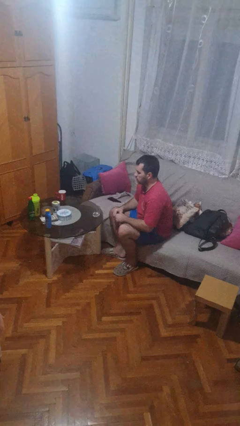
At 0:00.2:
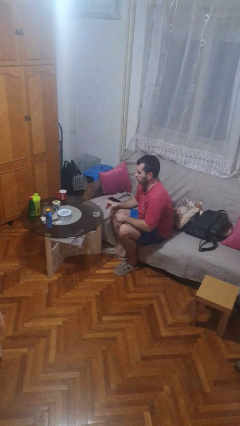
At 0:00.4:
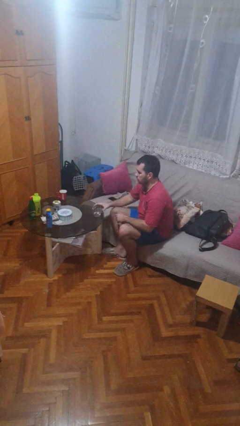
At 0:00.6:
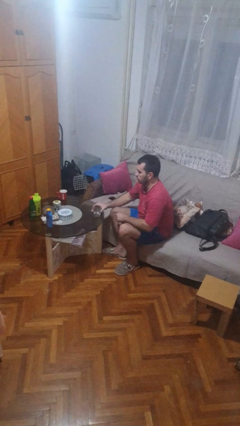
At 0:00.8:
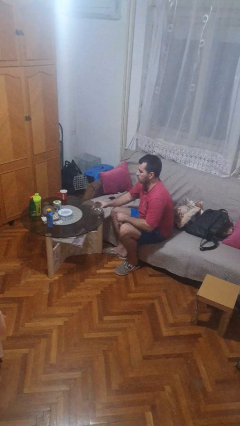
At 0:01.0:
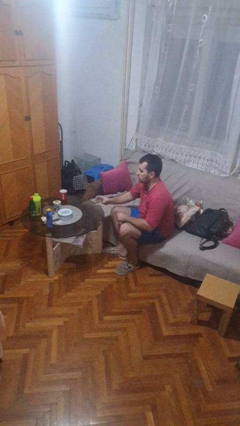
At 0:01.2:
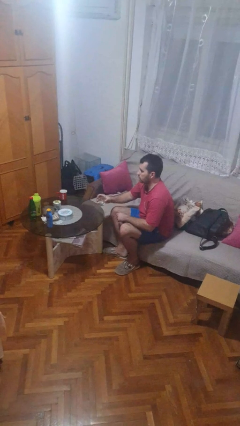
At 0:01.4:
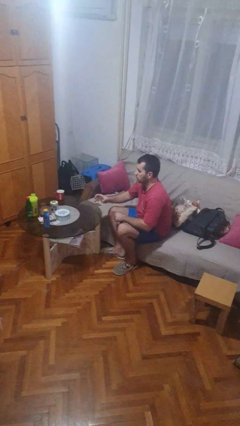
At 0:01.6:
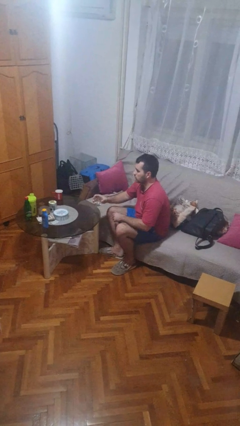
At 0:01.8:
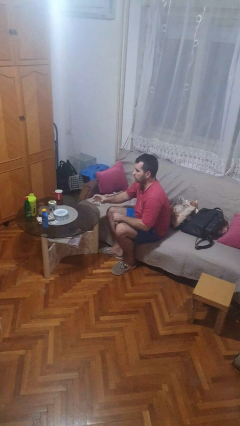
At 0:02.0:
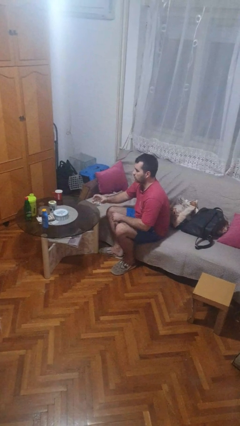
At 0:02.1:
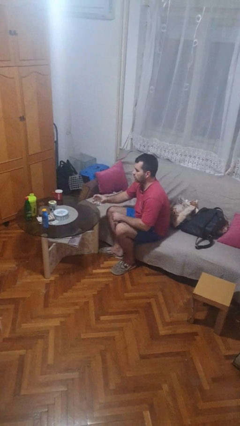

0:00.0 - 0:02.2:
person picks up object from table

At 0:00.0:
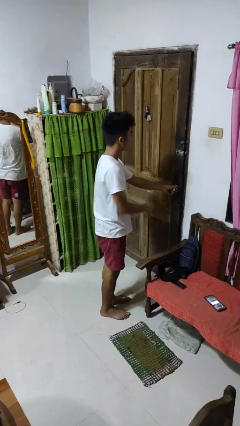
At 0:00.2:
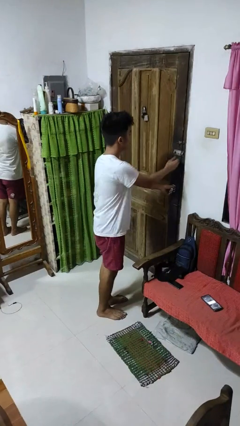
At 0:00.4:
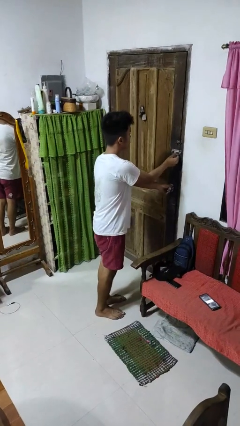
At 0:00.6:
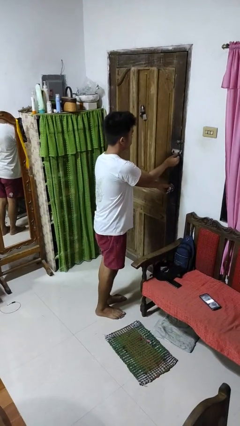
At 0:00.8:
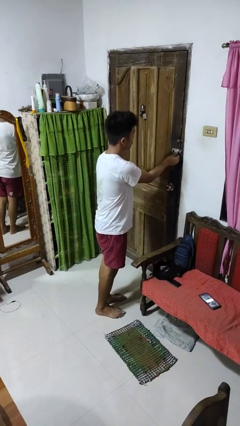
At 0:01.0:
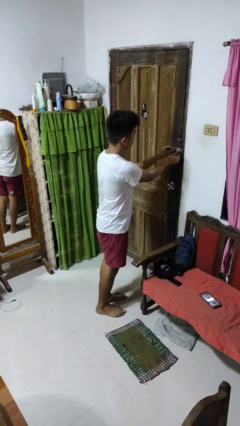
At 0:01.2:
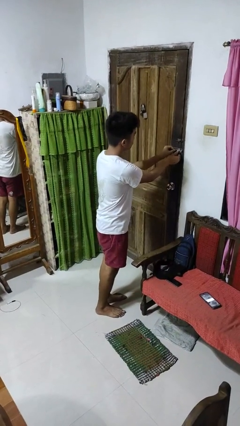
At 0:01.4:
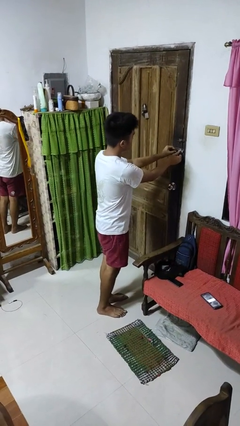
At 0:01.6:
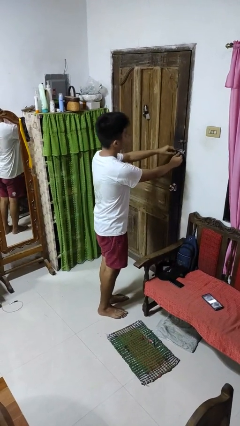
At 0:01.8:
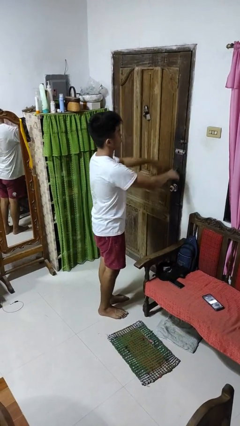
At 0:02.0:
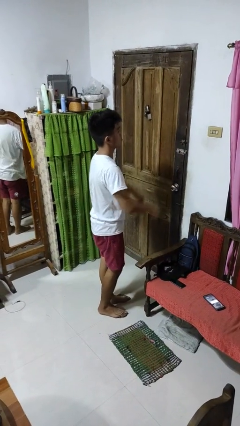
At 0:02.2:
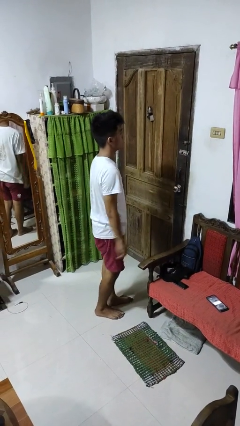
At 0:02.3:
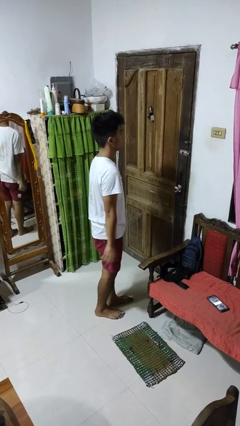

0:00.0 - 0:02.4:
person locks door with keys

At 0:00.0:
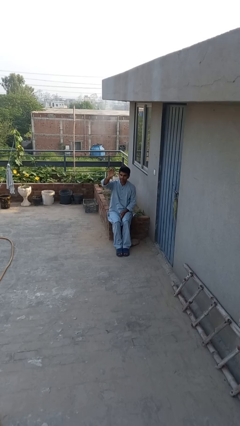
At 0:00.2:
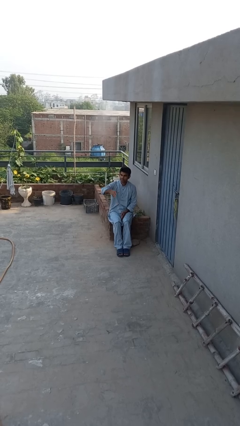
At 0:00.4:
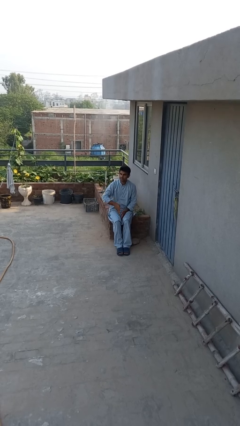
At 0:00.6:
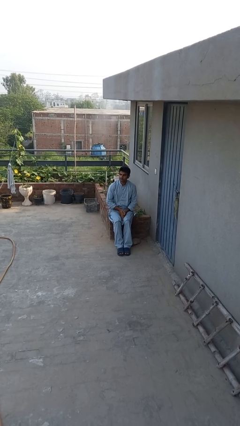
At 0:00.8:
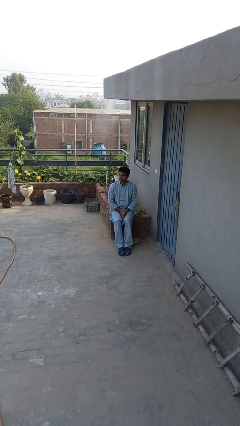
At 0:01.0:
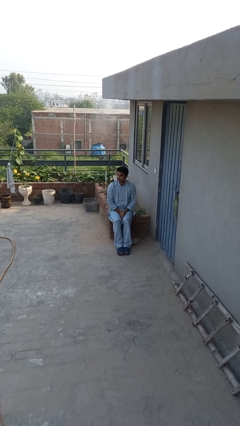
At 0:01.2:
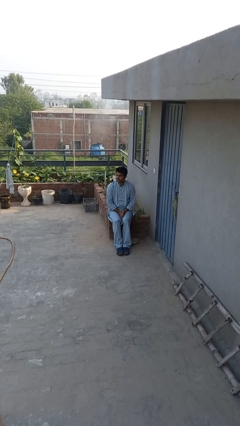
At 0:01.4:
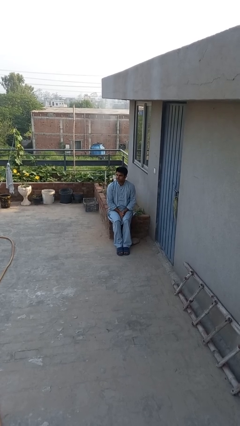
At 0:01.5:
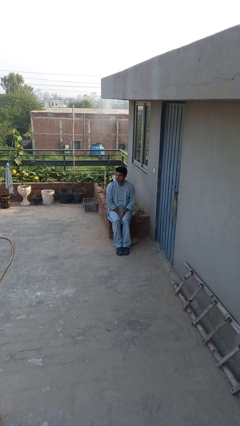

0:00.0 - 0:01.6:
person gestures lower hand

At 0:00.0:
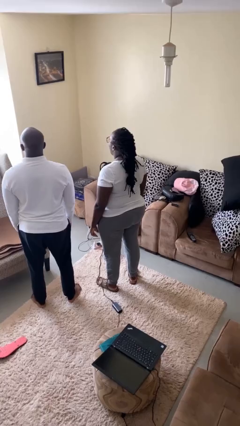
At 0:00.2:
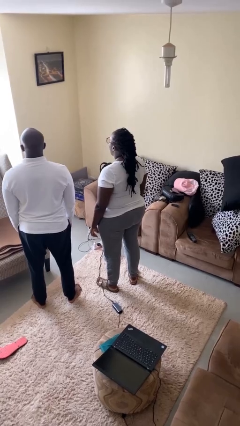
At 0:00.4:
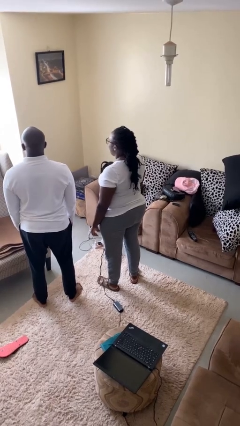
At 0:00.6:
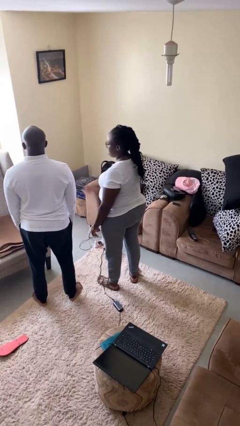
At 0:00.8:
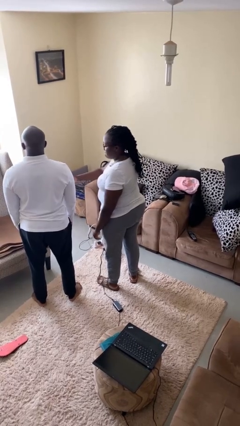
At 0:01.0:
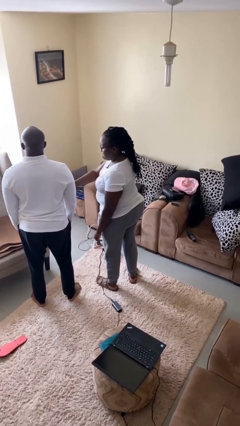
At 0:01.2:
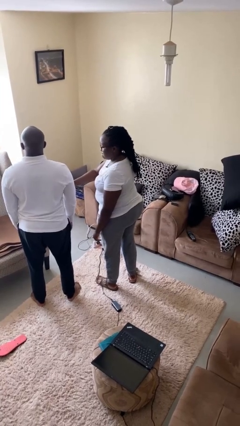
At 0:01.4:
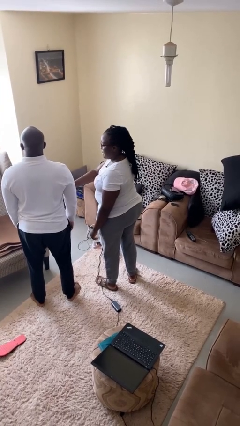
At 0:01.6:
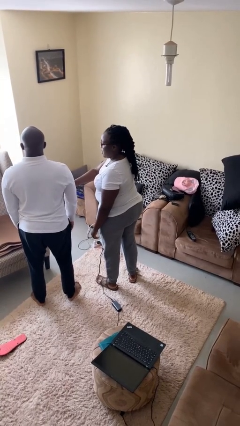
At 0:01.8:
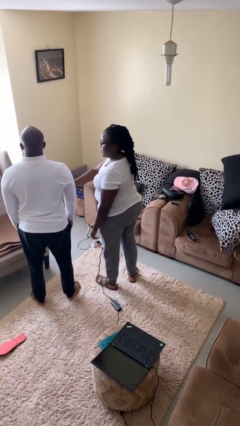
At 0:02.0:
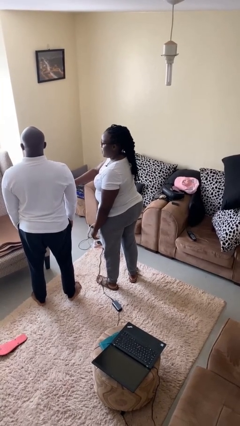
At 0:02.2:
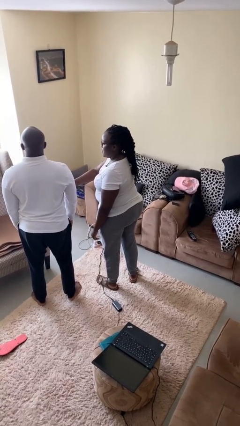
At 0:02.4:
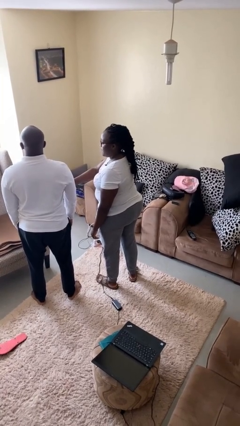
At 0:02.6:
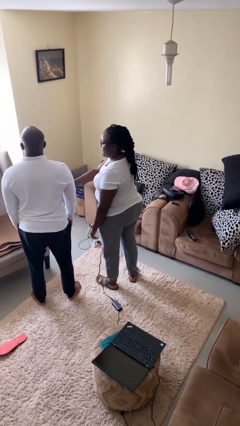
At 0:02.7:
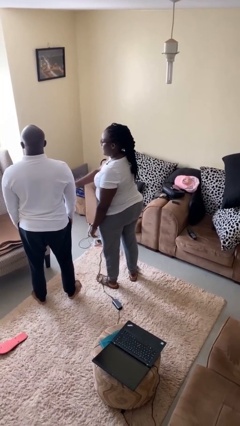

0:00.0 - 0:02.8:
person grabs person by bicep

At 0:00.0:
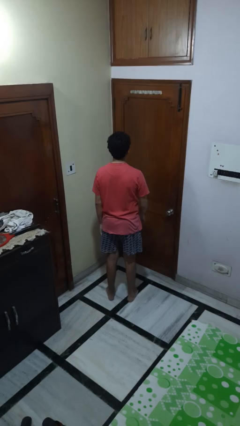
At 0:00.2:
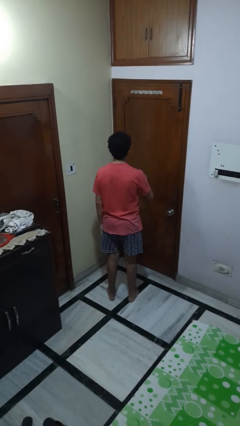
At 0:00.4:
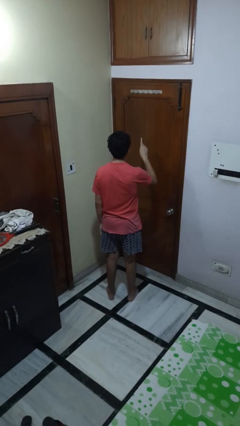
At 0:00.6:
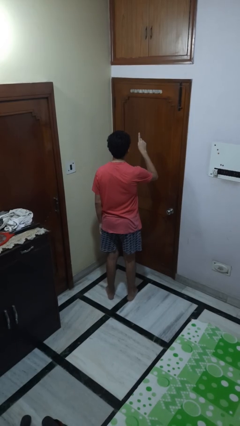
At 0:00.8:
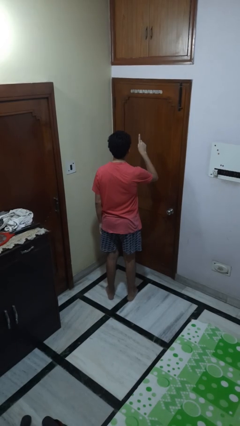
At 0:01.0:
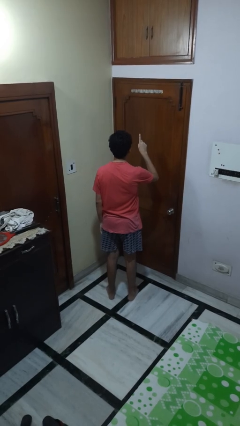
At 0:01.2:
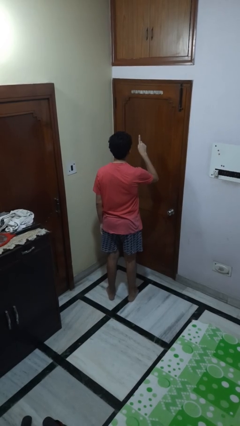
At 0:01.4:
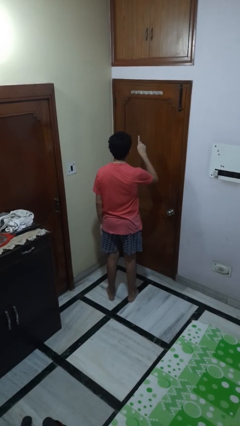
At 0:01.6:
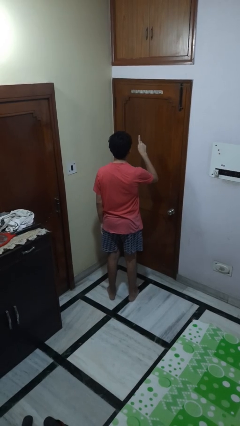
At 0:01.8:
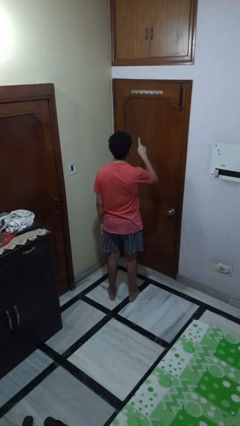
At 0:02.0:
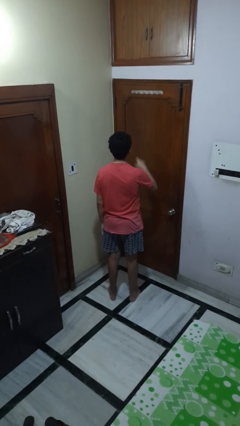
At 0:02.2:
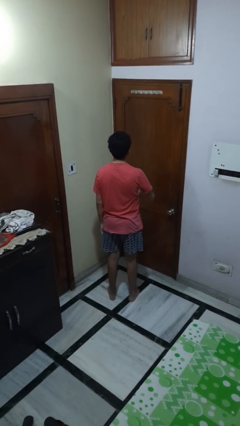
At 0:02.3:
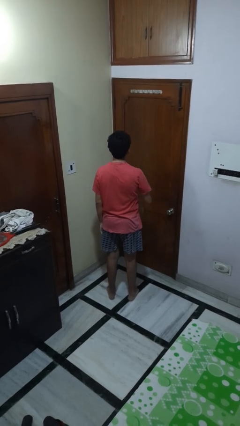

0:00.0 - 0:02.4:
person gestures number one

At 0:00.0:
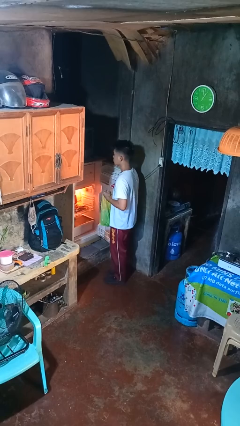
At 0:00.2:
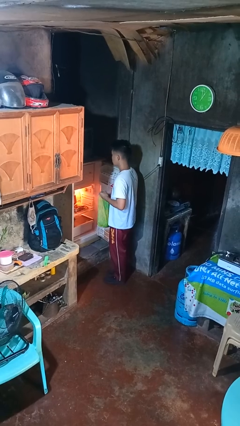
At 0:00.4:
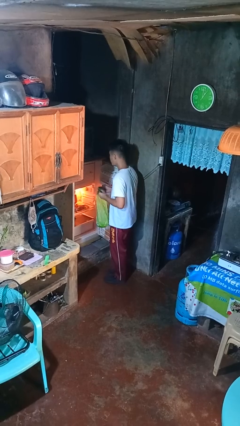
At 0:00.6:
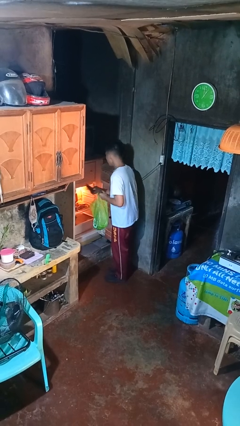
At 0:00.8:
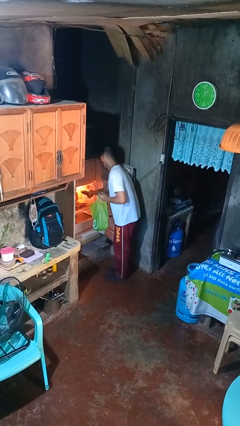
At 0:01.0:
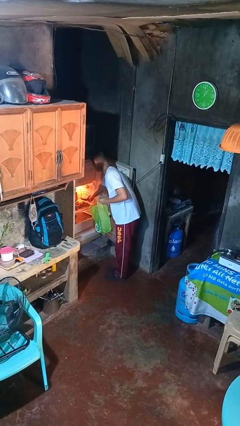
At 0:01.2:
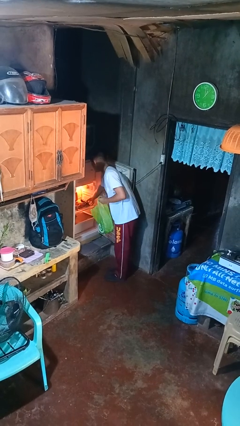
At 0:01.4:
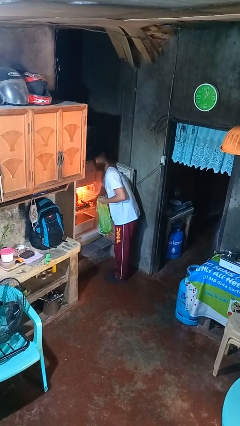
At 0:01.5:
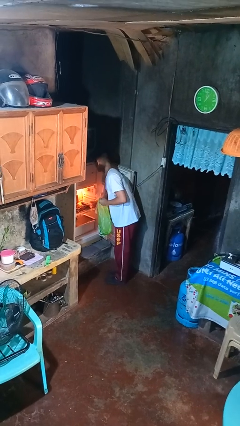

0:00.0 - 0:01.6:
person loads groceries into refrigerator

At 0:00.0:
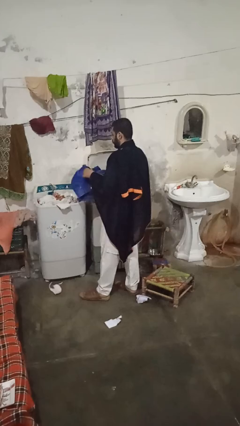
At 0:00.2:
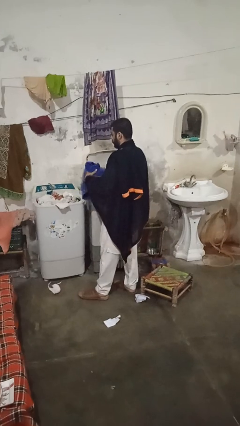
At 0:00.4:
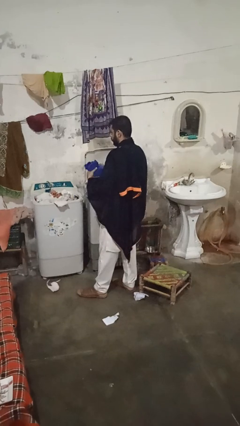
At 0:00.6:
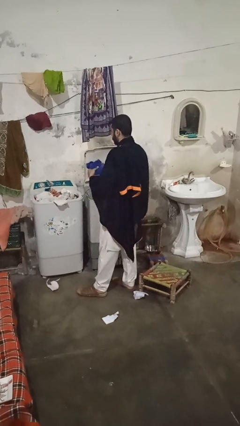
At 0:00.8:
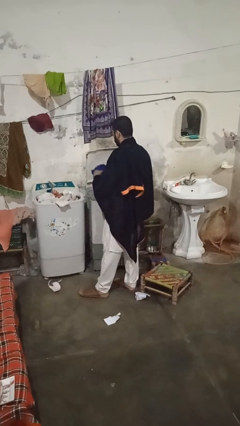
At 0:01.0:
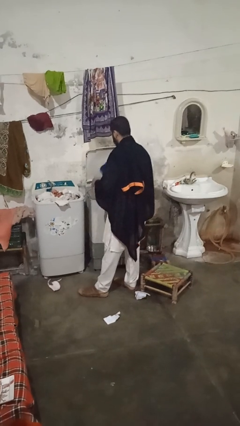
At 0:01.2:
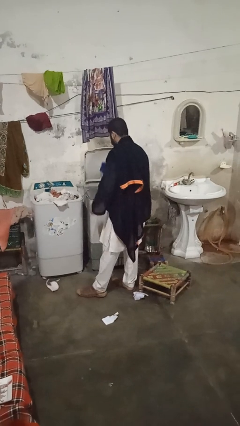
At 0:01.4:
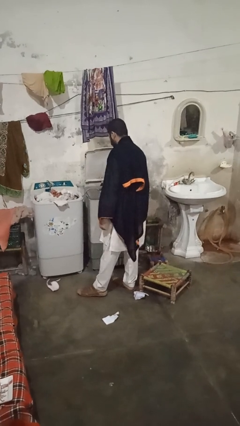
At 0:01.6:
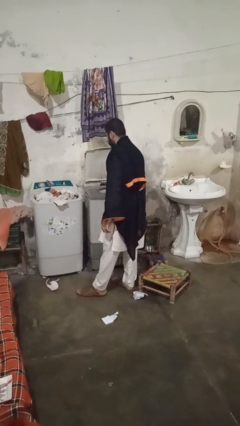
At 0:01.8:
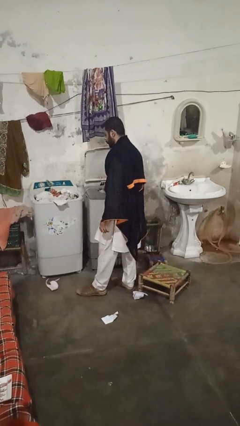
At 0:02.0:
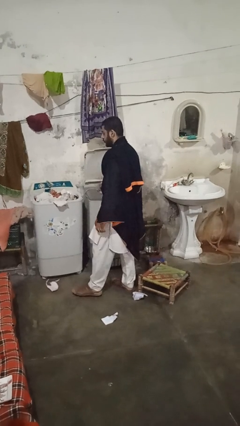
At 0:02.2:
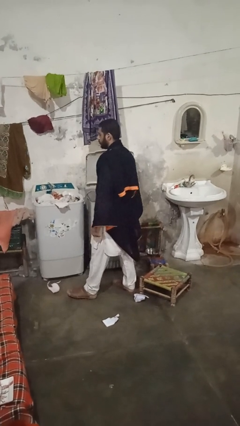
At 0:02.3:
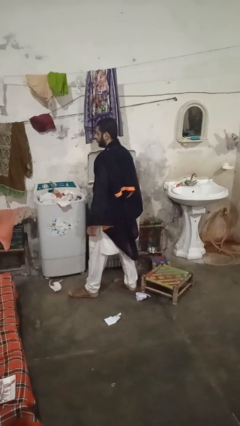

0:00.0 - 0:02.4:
person loads clotheswasher

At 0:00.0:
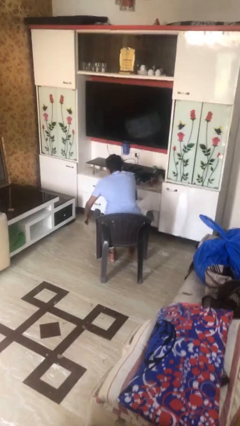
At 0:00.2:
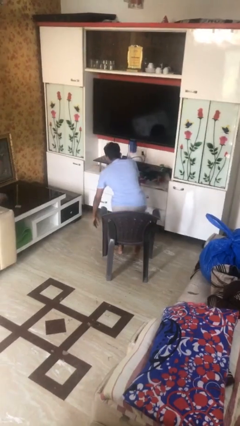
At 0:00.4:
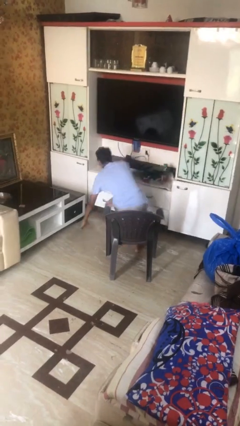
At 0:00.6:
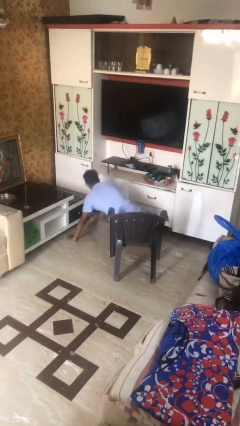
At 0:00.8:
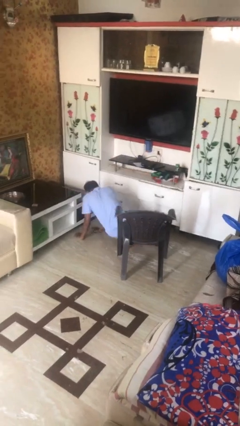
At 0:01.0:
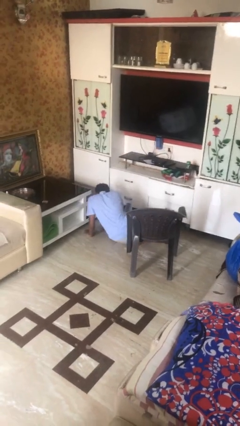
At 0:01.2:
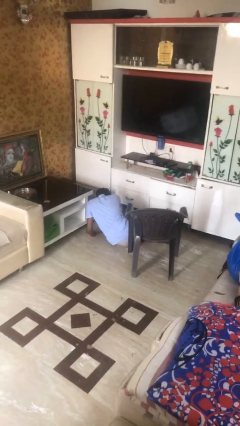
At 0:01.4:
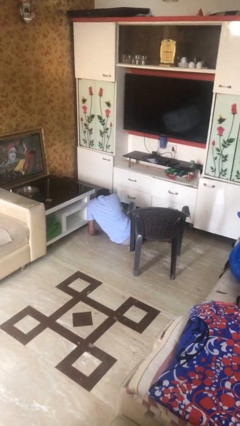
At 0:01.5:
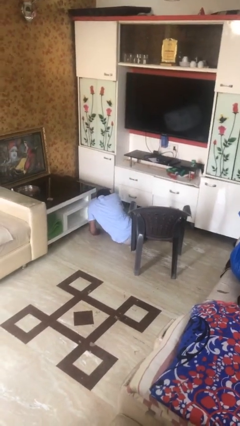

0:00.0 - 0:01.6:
person falls from chair
